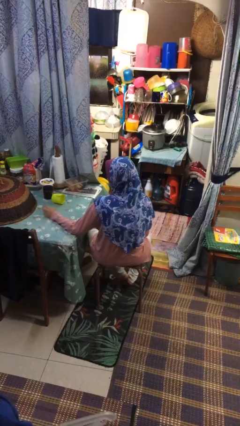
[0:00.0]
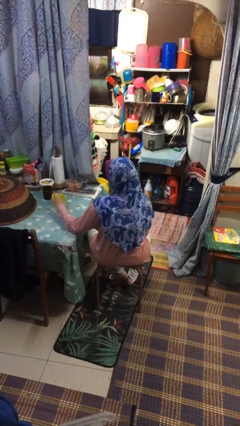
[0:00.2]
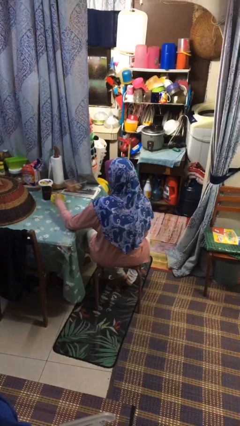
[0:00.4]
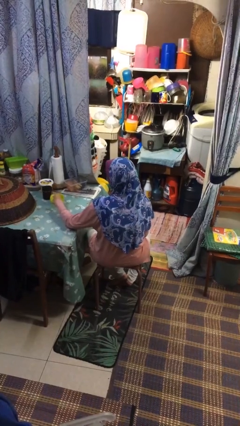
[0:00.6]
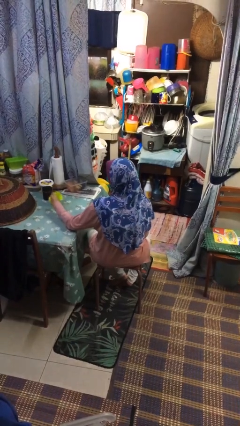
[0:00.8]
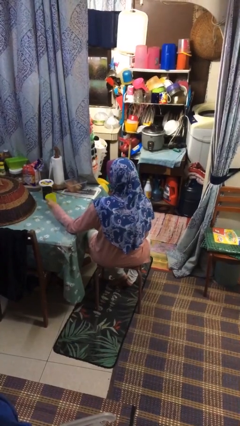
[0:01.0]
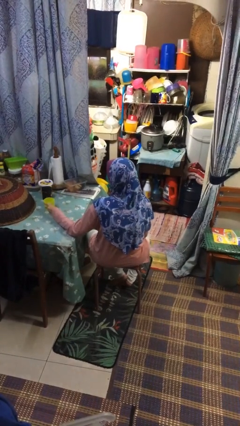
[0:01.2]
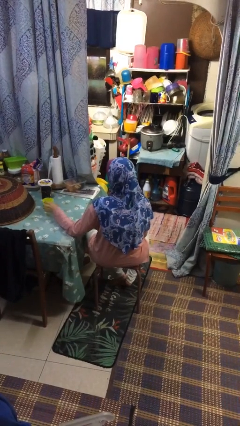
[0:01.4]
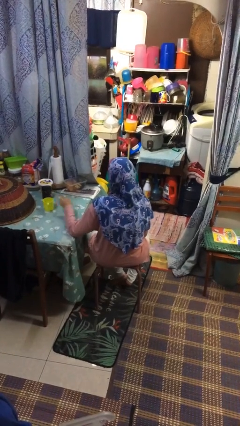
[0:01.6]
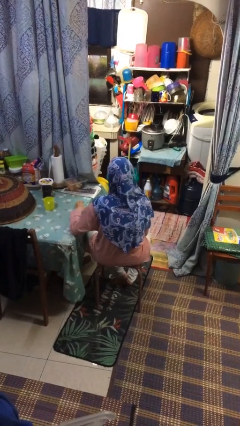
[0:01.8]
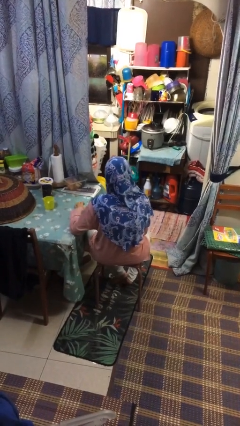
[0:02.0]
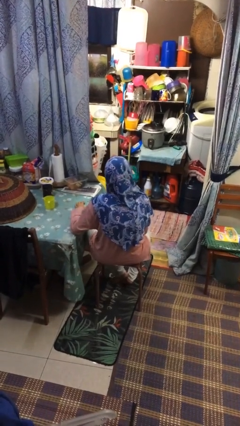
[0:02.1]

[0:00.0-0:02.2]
person sets upright glass

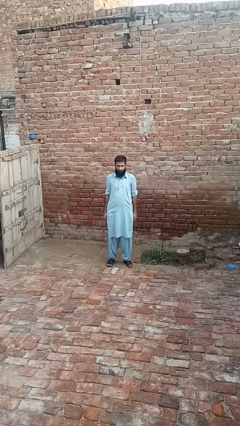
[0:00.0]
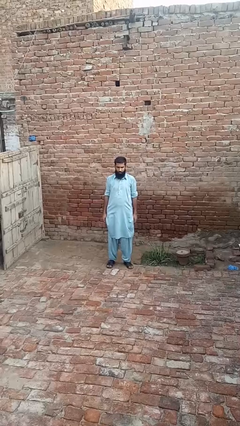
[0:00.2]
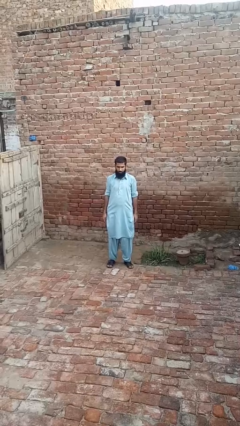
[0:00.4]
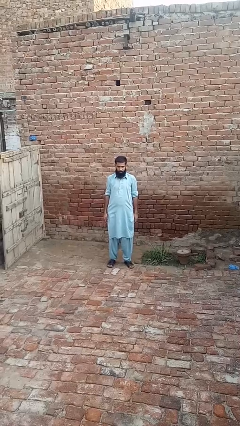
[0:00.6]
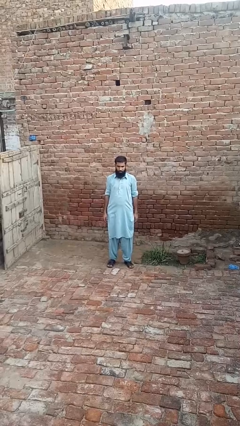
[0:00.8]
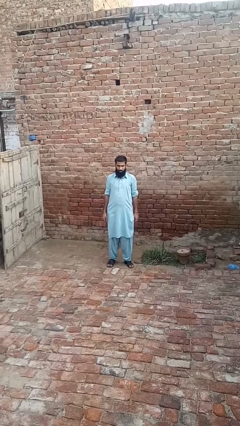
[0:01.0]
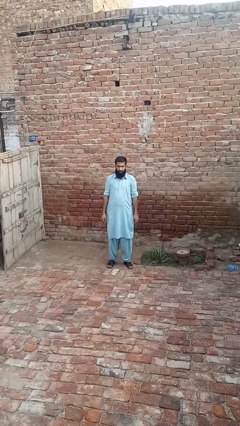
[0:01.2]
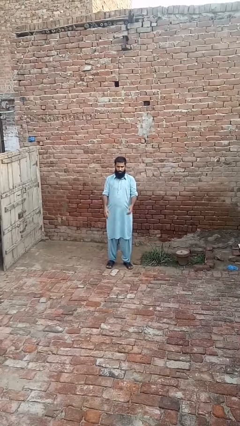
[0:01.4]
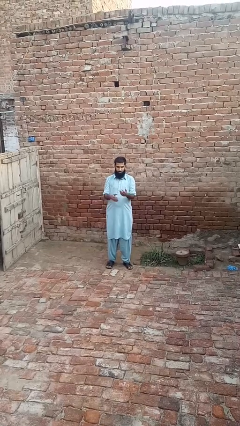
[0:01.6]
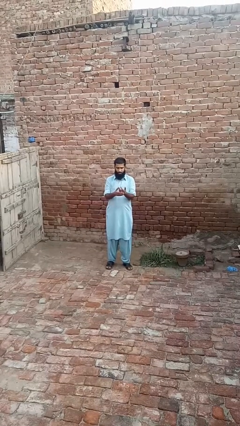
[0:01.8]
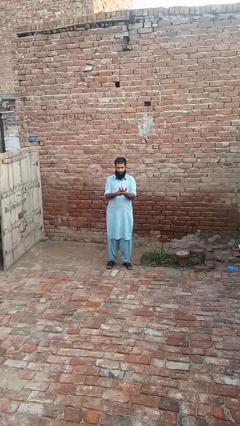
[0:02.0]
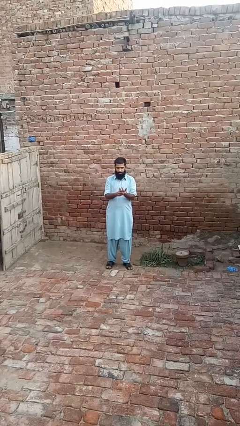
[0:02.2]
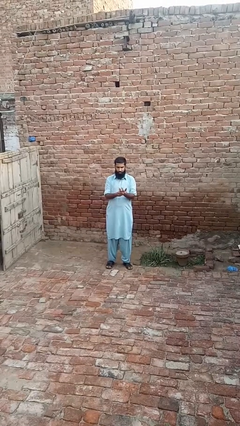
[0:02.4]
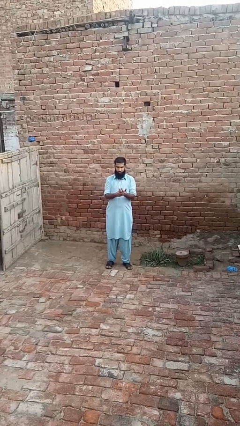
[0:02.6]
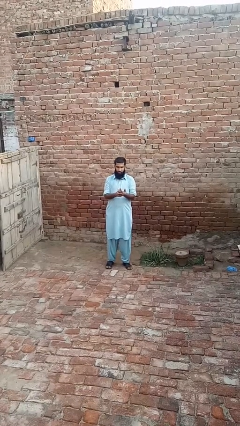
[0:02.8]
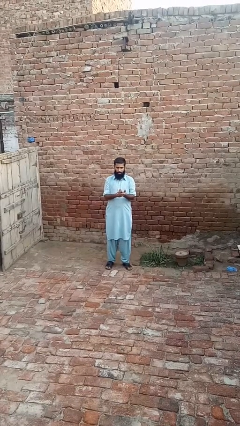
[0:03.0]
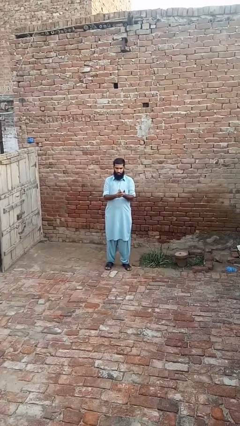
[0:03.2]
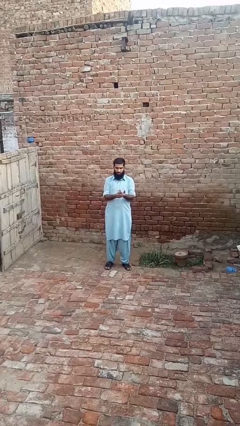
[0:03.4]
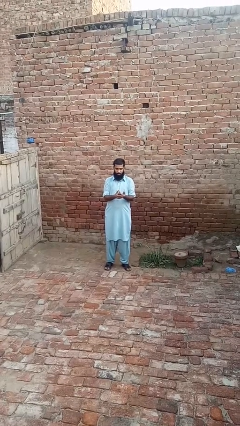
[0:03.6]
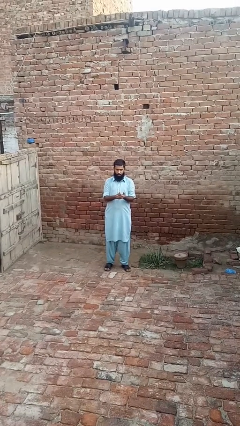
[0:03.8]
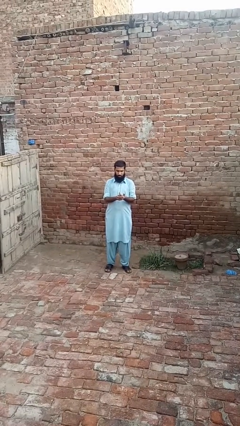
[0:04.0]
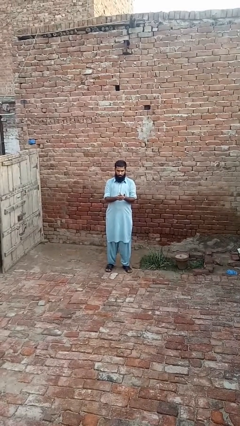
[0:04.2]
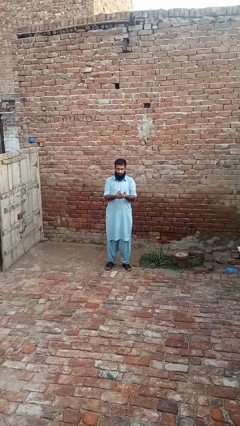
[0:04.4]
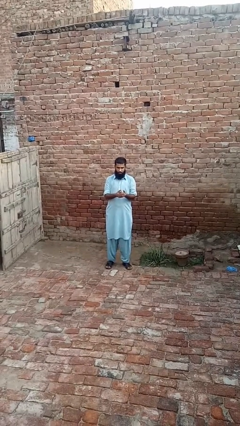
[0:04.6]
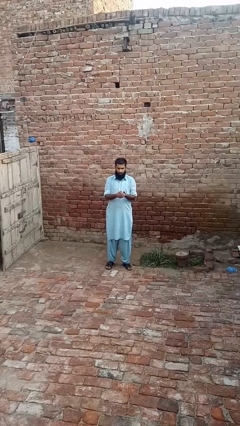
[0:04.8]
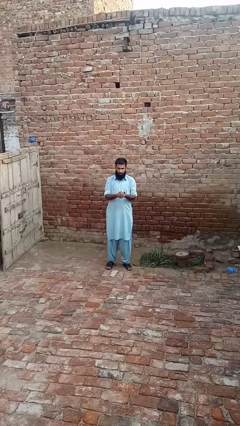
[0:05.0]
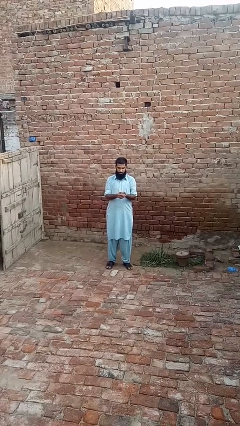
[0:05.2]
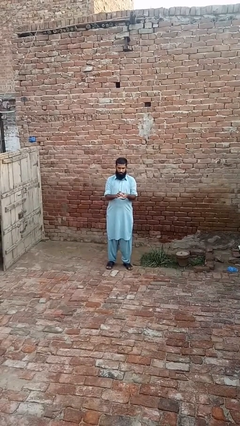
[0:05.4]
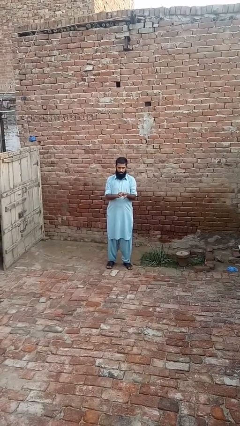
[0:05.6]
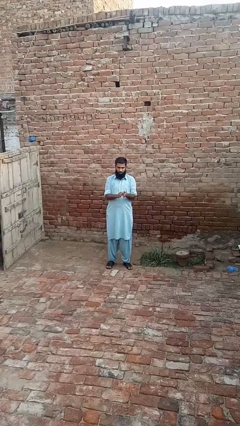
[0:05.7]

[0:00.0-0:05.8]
person cracks knuckles

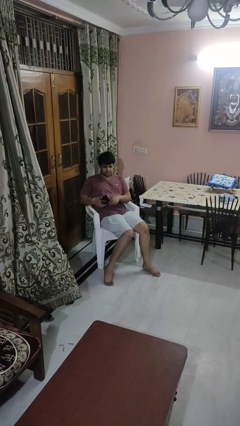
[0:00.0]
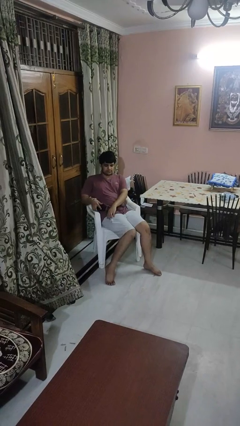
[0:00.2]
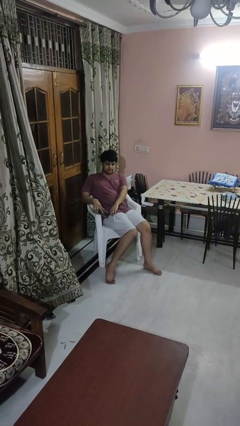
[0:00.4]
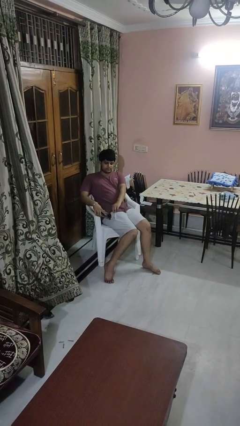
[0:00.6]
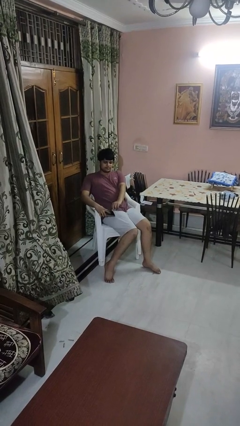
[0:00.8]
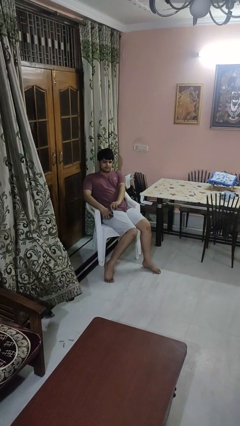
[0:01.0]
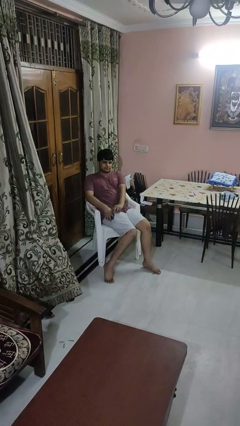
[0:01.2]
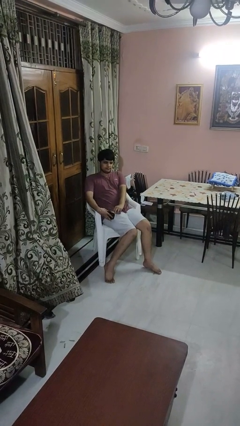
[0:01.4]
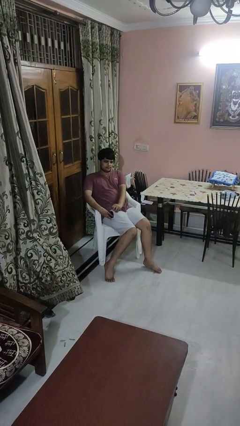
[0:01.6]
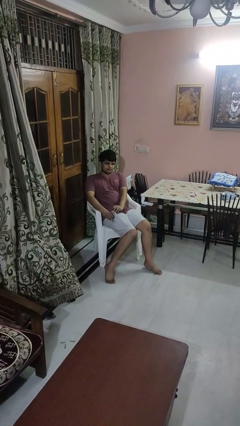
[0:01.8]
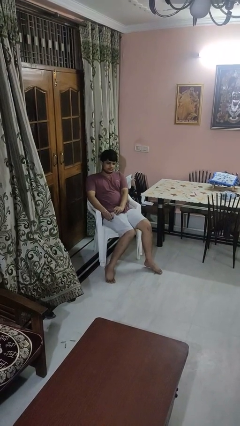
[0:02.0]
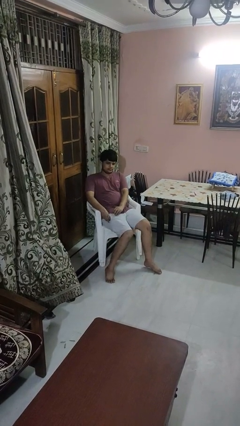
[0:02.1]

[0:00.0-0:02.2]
person puts phone into pocket

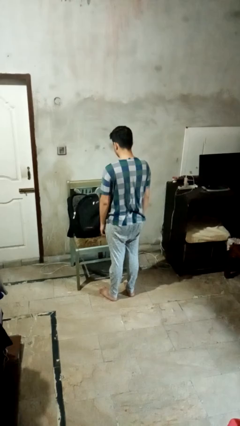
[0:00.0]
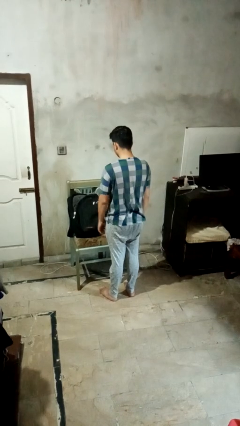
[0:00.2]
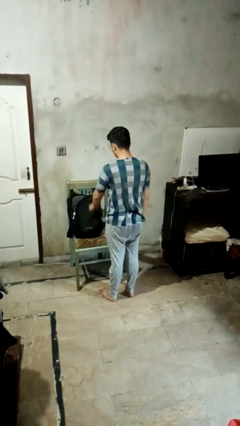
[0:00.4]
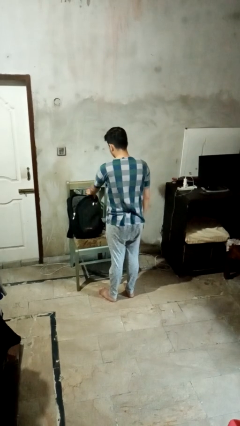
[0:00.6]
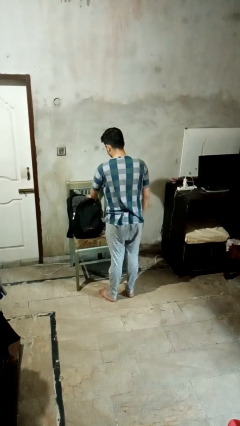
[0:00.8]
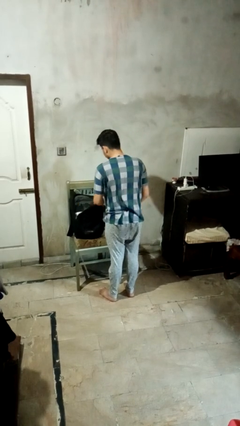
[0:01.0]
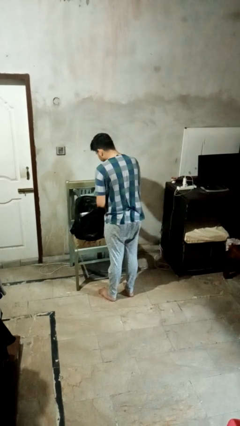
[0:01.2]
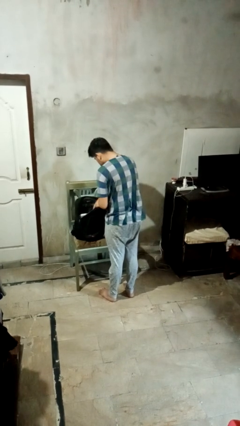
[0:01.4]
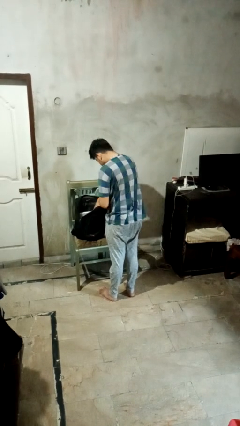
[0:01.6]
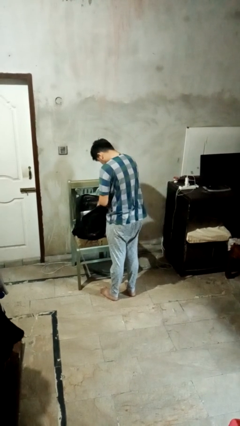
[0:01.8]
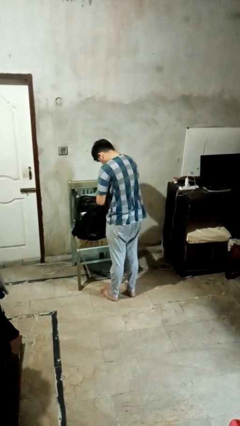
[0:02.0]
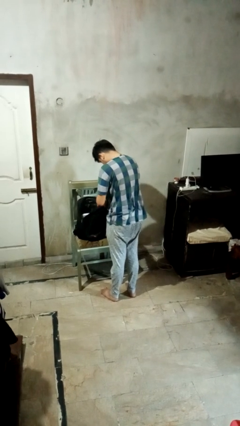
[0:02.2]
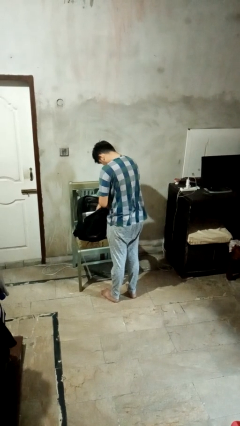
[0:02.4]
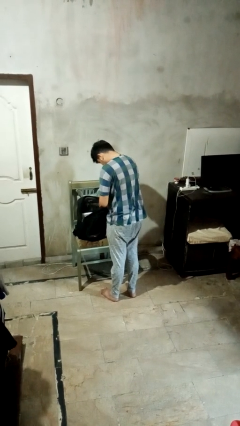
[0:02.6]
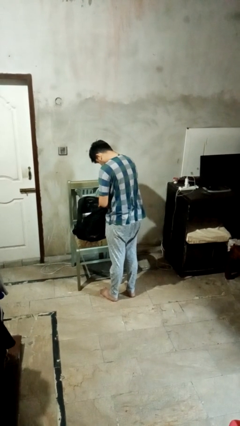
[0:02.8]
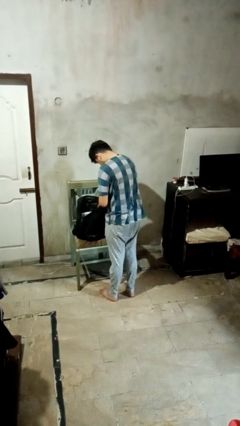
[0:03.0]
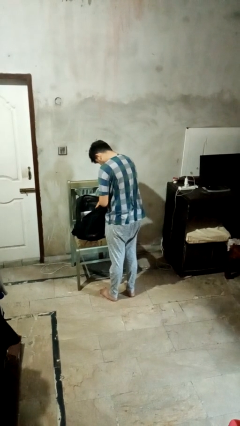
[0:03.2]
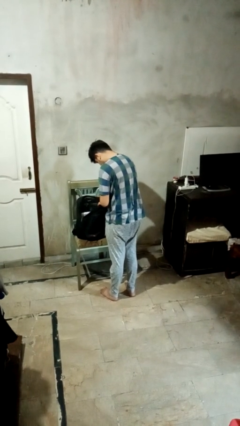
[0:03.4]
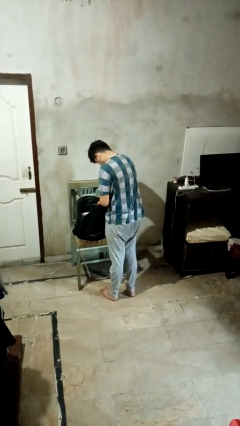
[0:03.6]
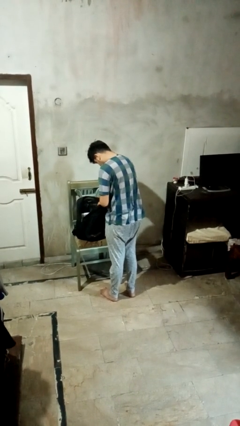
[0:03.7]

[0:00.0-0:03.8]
person searches in backpack

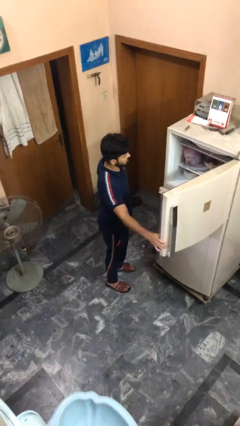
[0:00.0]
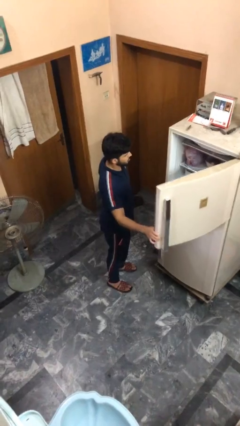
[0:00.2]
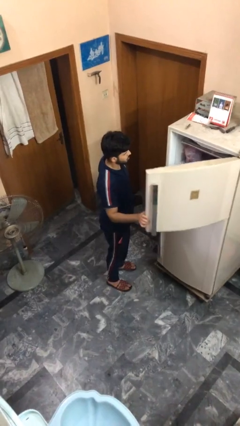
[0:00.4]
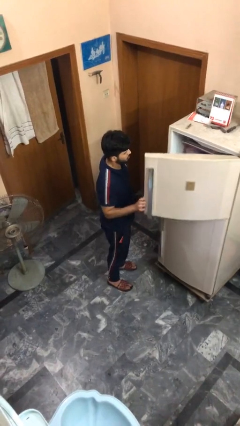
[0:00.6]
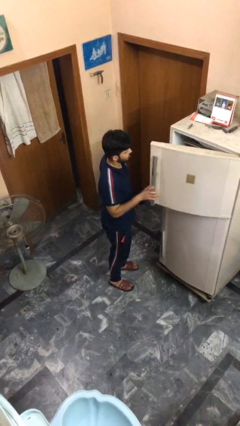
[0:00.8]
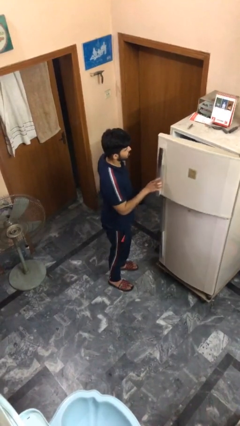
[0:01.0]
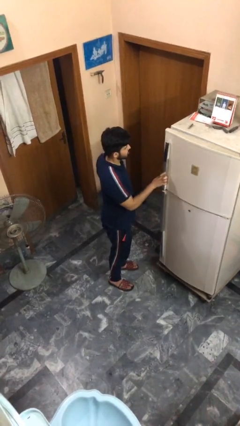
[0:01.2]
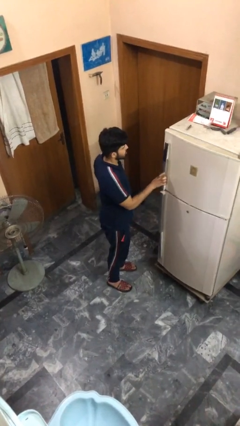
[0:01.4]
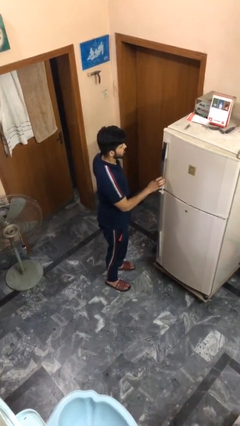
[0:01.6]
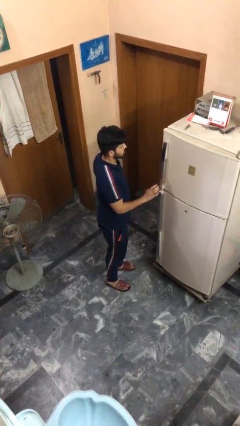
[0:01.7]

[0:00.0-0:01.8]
person closes refrigerator

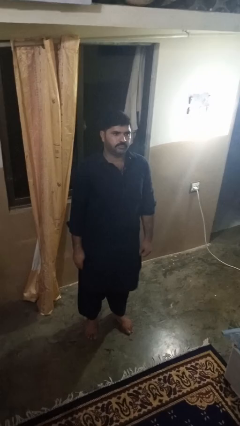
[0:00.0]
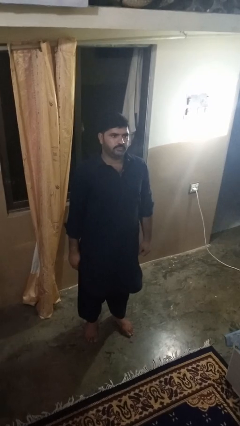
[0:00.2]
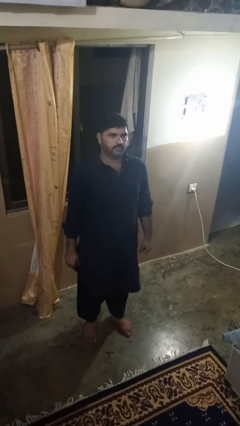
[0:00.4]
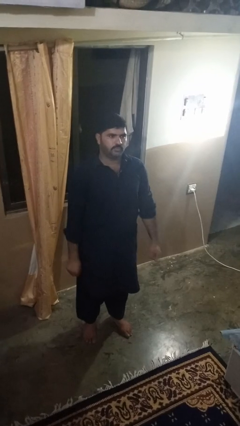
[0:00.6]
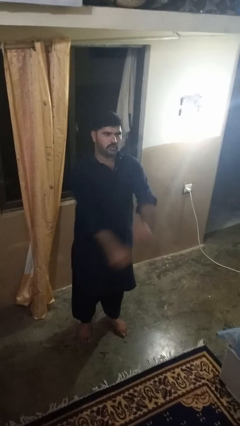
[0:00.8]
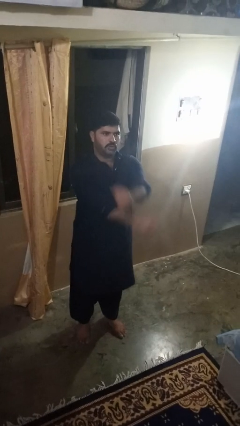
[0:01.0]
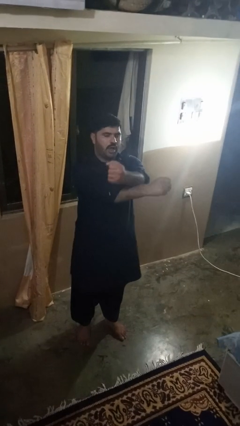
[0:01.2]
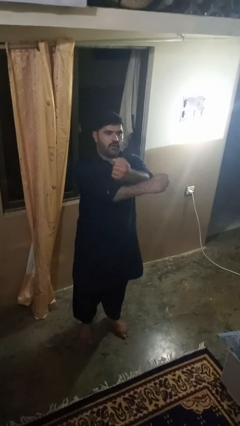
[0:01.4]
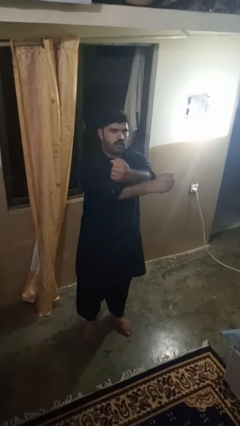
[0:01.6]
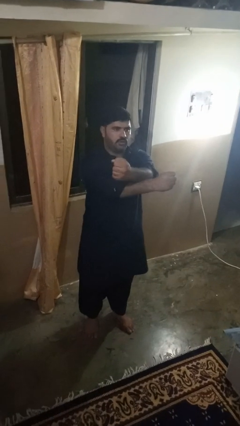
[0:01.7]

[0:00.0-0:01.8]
person crosses arms
